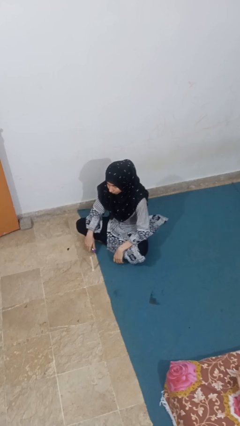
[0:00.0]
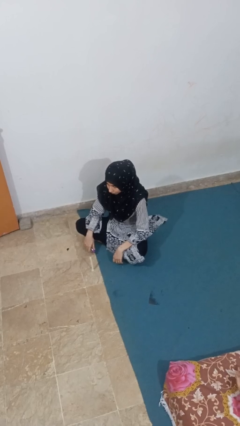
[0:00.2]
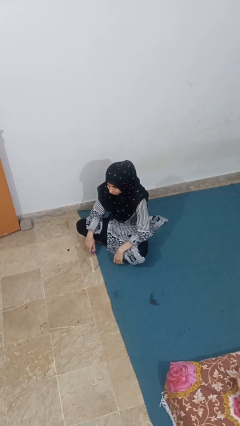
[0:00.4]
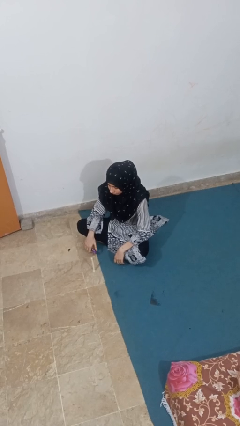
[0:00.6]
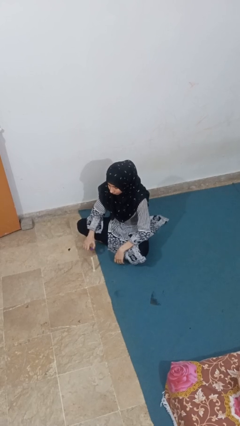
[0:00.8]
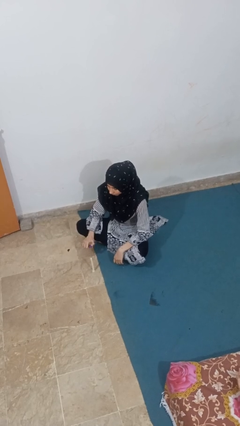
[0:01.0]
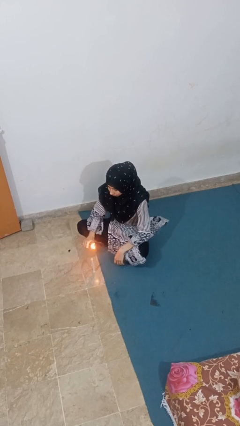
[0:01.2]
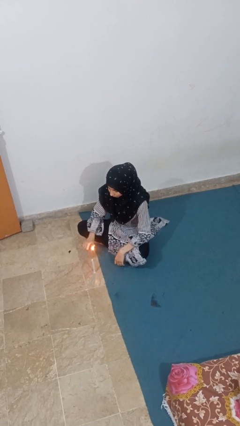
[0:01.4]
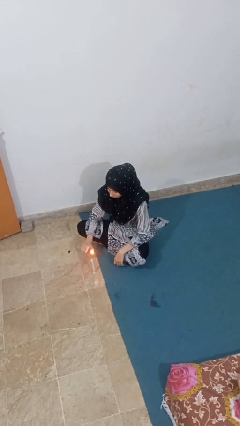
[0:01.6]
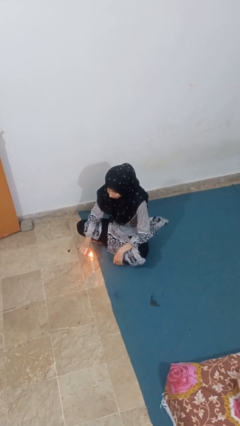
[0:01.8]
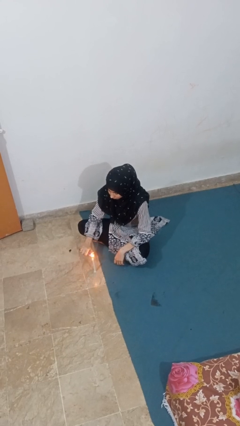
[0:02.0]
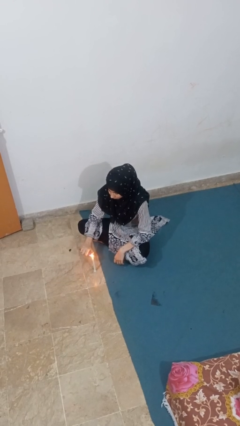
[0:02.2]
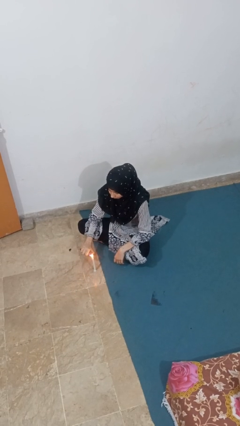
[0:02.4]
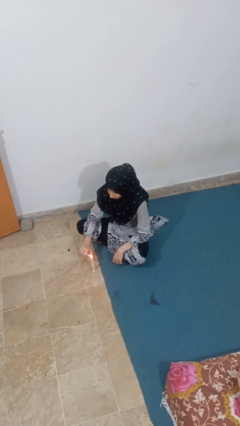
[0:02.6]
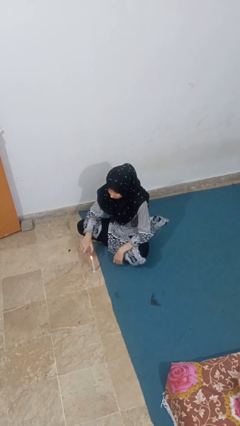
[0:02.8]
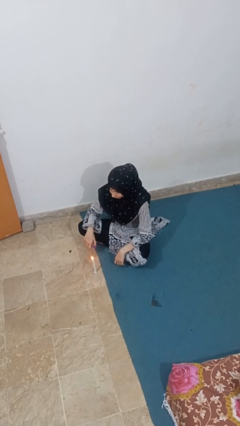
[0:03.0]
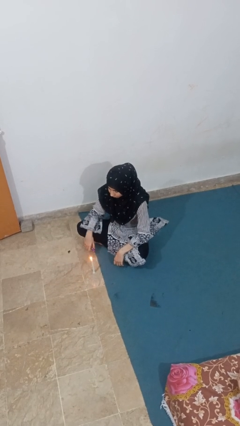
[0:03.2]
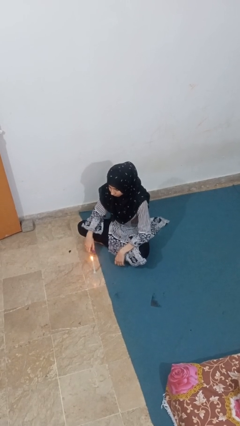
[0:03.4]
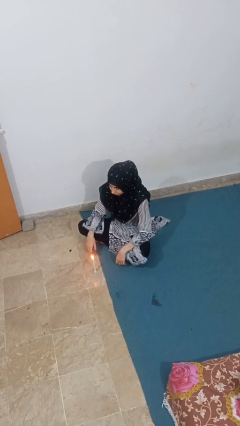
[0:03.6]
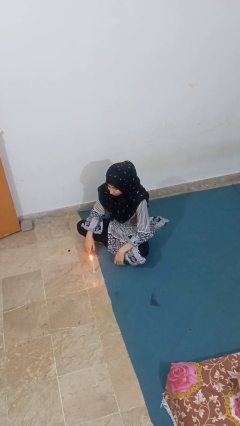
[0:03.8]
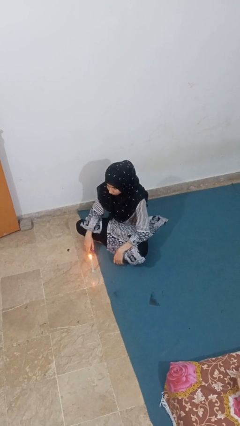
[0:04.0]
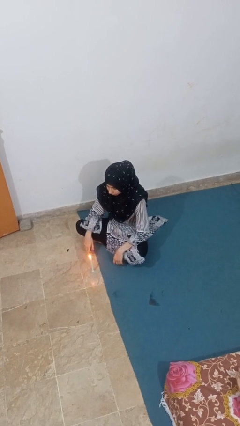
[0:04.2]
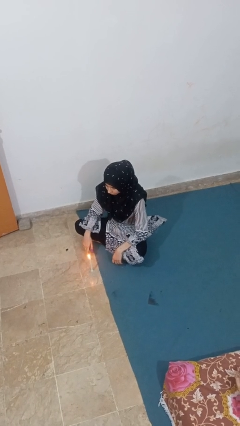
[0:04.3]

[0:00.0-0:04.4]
person lights candle

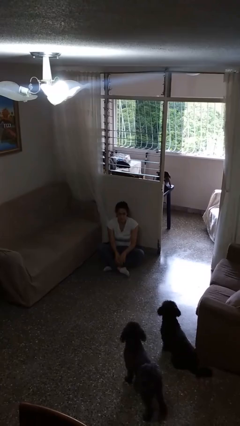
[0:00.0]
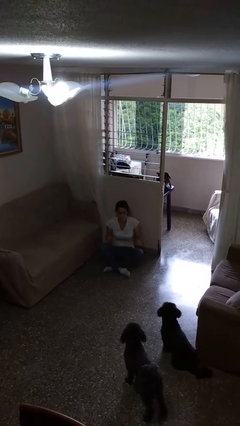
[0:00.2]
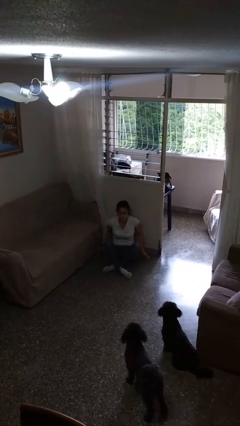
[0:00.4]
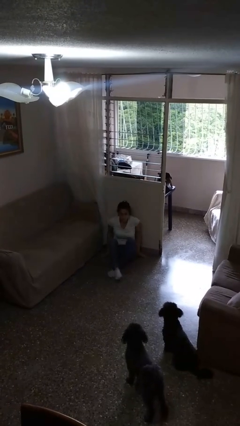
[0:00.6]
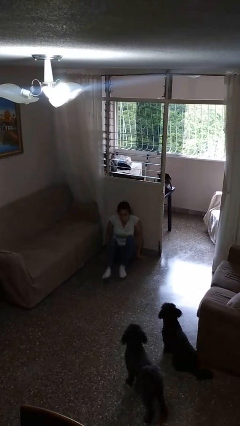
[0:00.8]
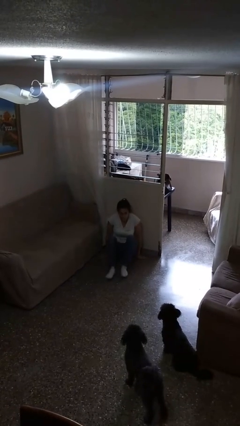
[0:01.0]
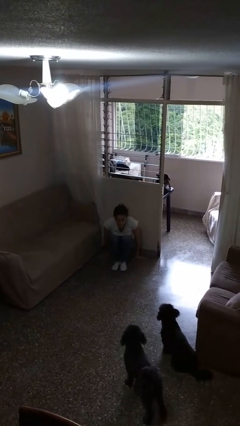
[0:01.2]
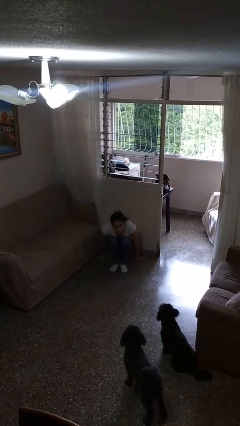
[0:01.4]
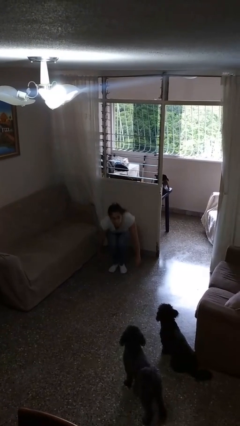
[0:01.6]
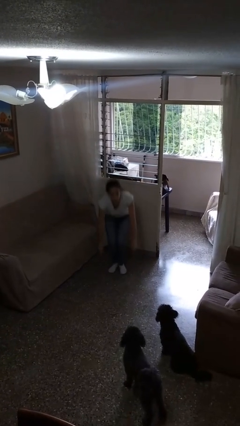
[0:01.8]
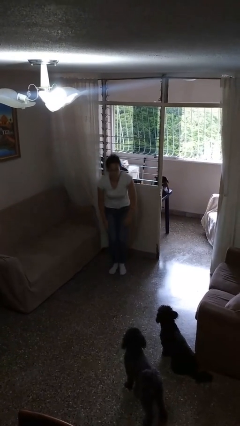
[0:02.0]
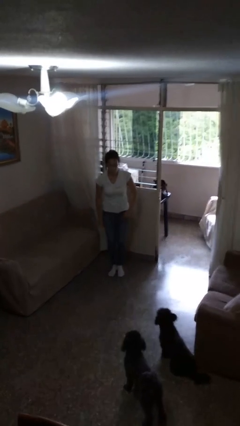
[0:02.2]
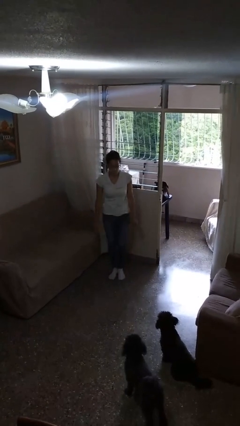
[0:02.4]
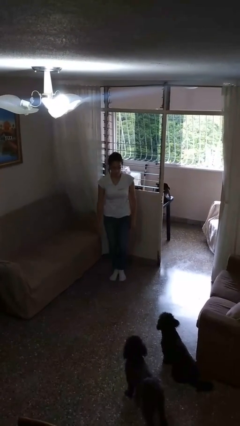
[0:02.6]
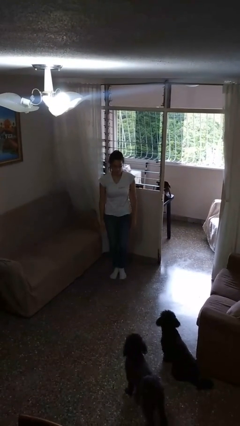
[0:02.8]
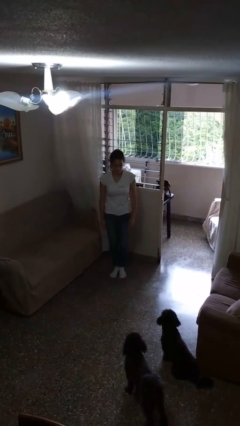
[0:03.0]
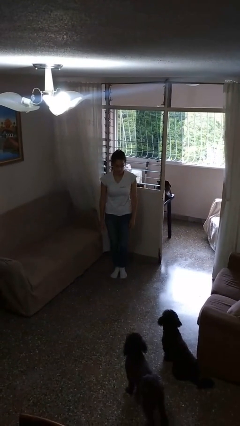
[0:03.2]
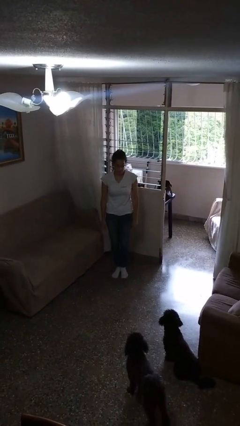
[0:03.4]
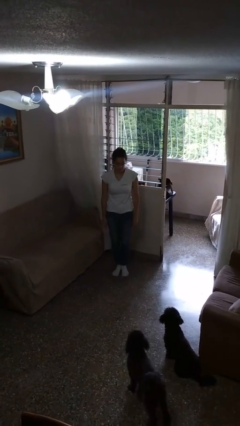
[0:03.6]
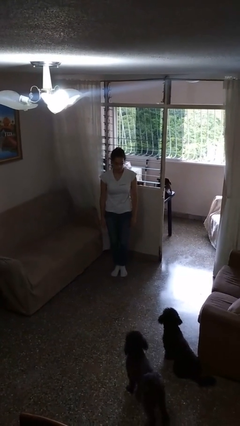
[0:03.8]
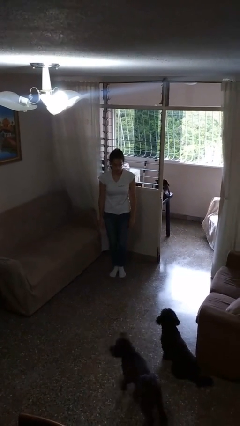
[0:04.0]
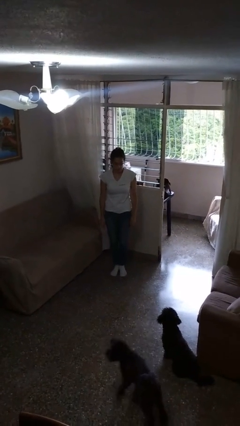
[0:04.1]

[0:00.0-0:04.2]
person stands up from floor

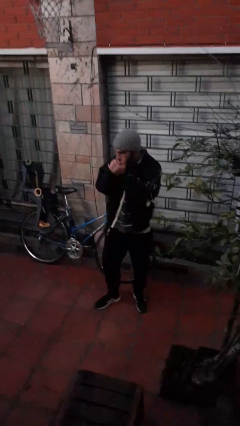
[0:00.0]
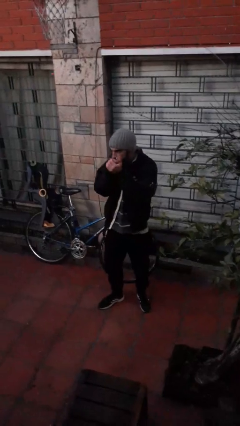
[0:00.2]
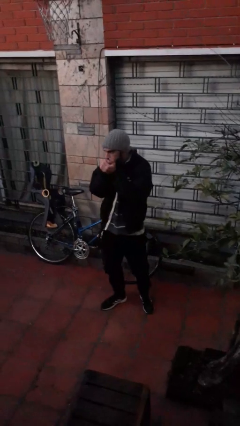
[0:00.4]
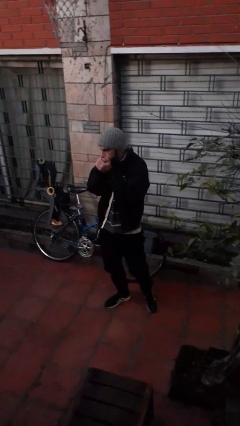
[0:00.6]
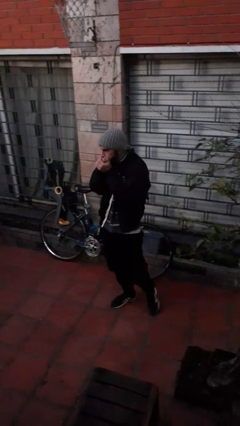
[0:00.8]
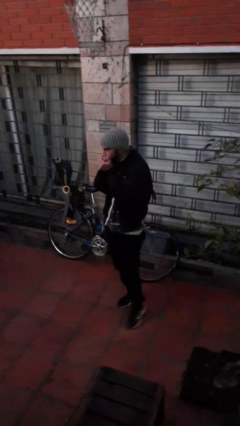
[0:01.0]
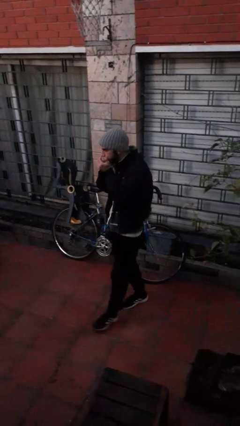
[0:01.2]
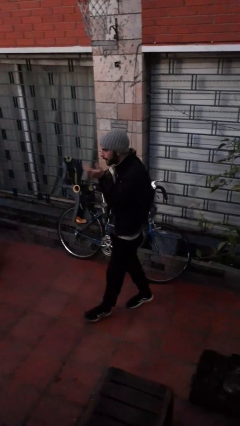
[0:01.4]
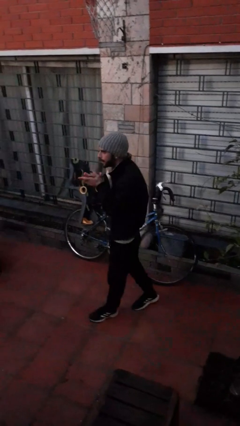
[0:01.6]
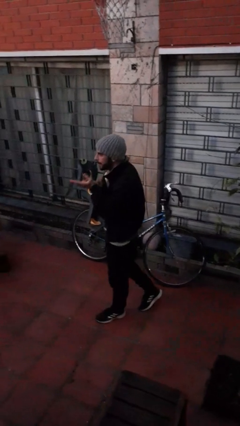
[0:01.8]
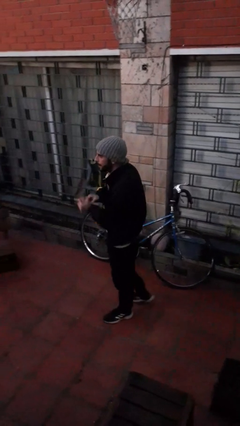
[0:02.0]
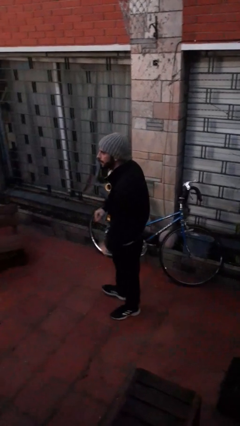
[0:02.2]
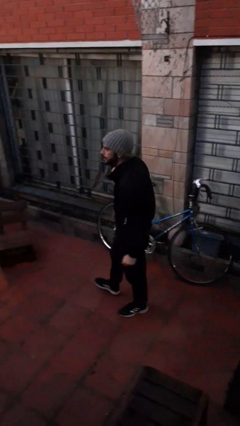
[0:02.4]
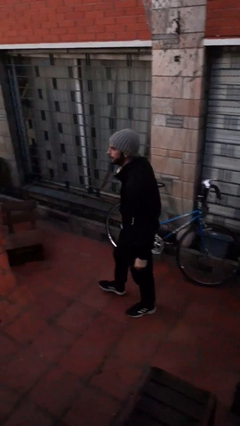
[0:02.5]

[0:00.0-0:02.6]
person blows into hands

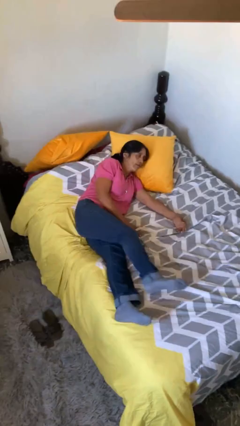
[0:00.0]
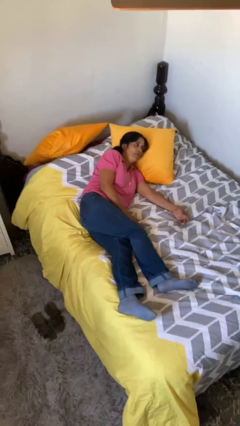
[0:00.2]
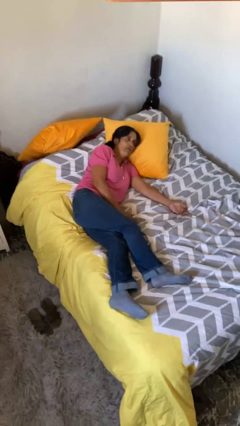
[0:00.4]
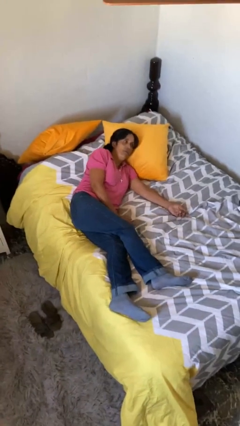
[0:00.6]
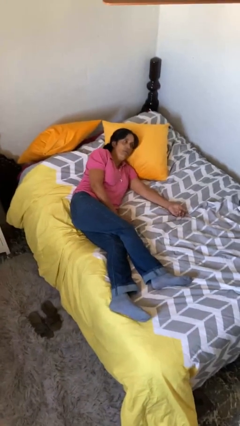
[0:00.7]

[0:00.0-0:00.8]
person lies down on bed

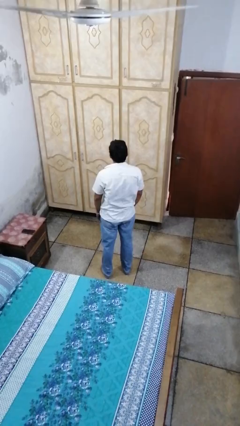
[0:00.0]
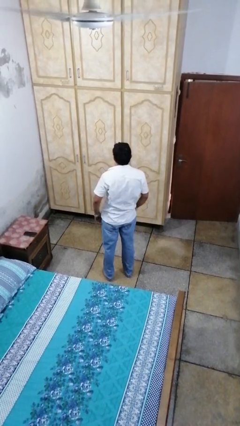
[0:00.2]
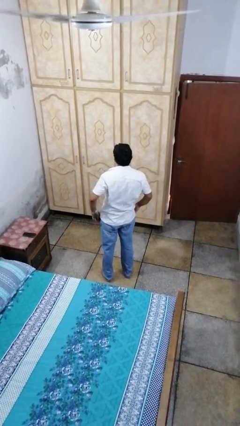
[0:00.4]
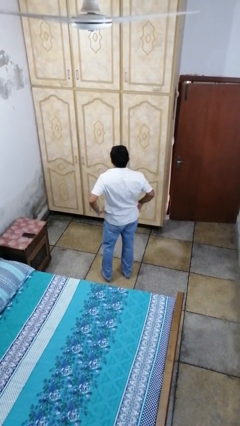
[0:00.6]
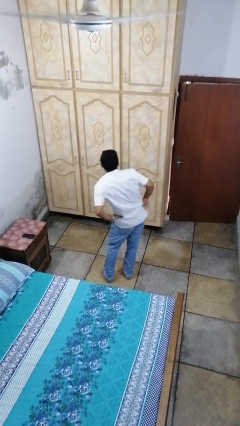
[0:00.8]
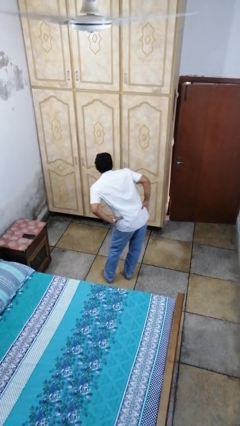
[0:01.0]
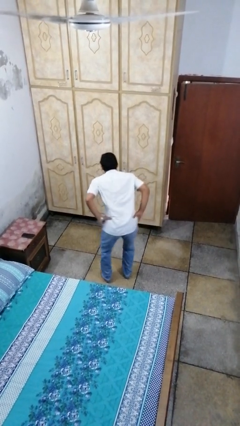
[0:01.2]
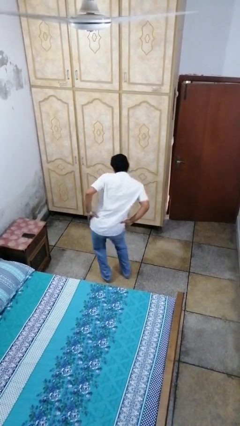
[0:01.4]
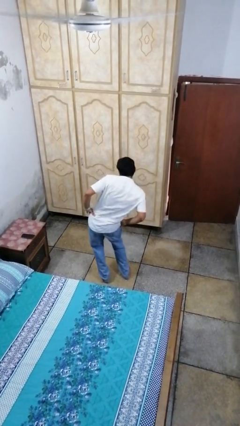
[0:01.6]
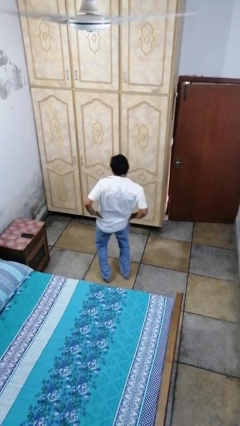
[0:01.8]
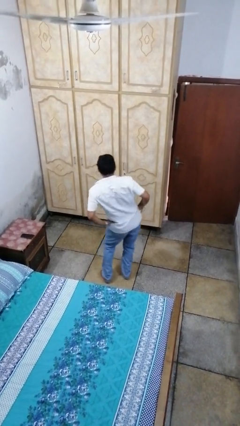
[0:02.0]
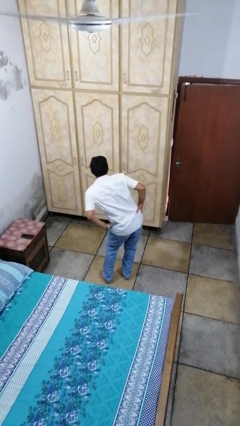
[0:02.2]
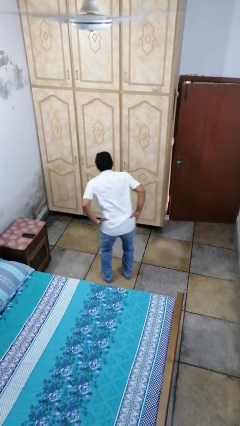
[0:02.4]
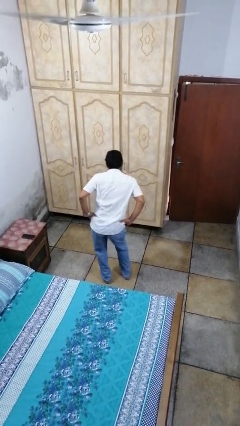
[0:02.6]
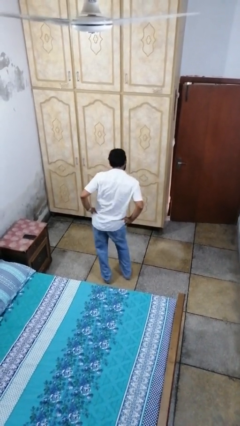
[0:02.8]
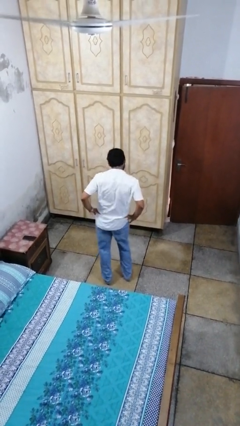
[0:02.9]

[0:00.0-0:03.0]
person wiggles hips

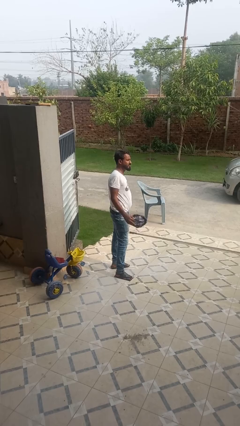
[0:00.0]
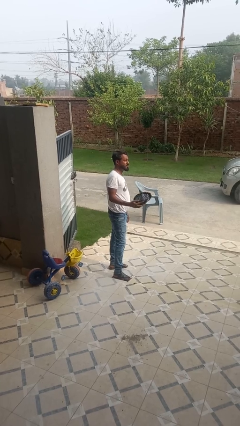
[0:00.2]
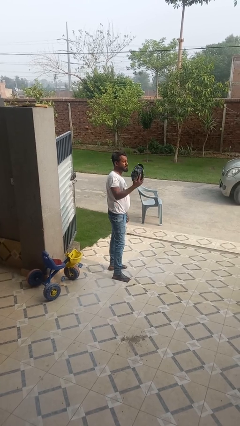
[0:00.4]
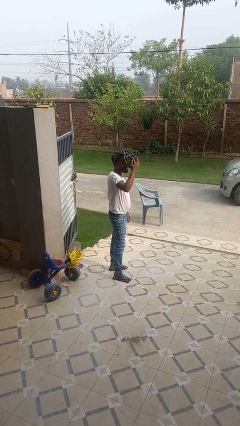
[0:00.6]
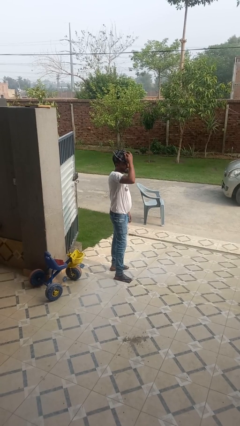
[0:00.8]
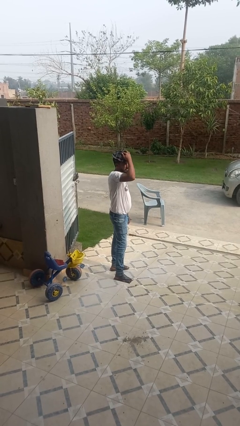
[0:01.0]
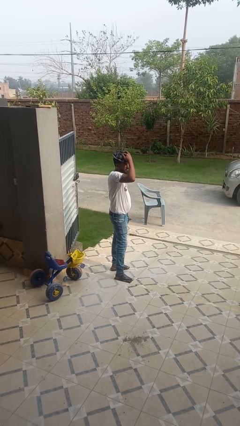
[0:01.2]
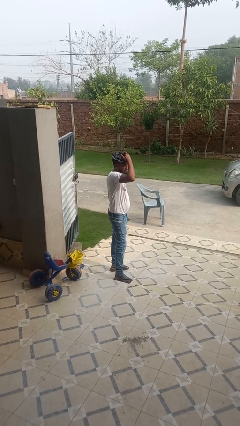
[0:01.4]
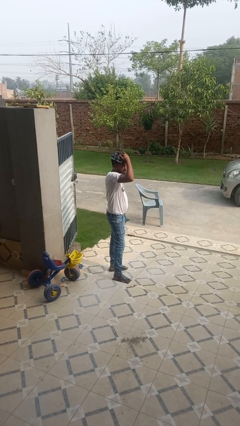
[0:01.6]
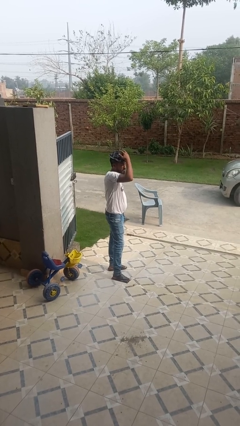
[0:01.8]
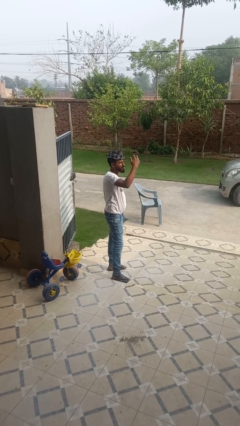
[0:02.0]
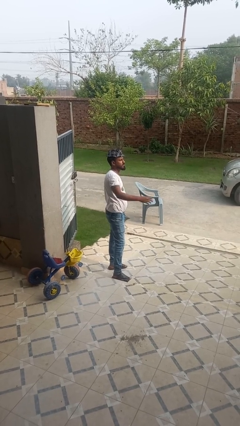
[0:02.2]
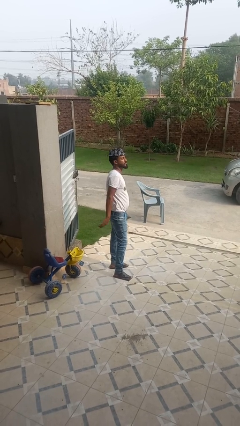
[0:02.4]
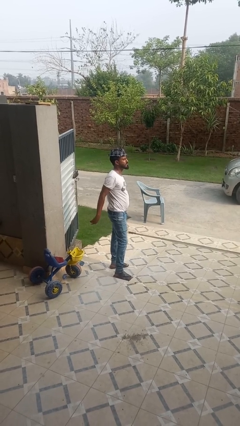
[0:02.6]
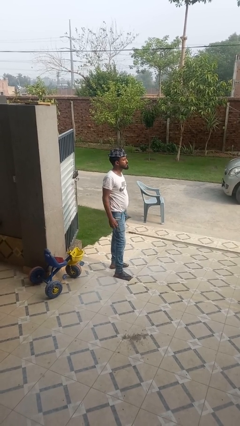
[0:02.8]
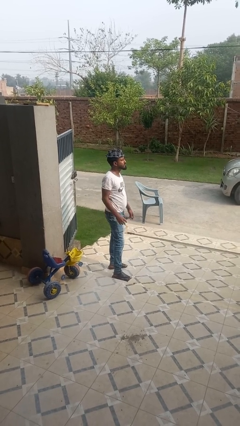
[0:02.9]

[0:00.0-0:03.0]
person puts on hat
